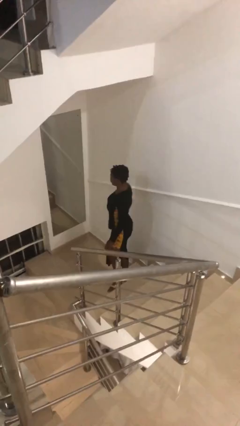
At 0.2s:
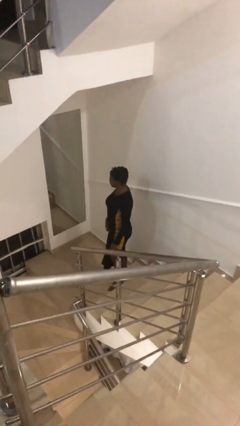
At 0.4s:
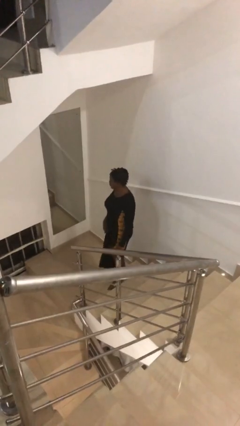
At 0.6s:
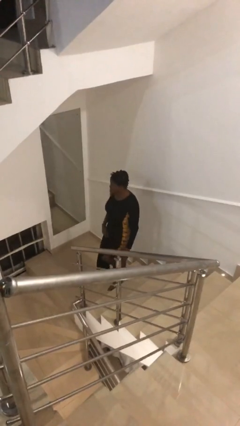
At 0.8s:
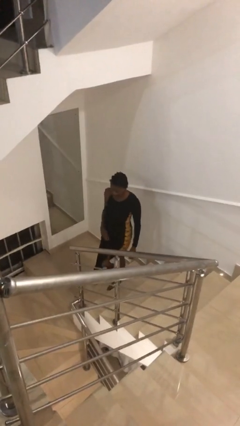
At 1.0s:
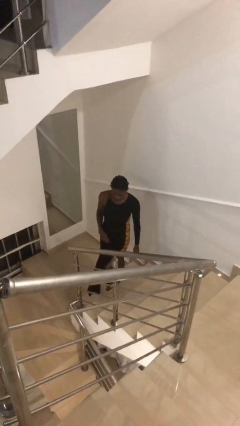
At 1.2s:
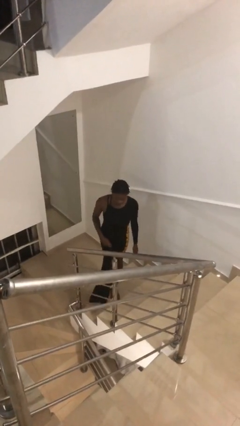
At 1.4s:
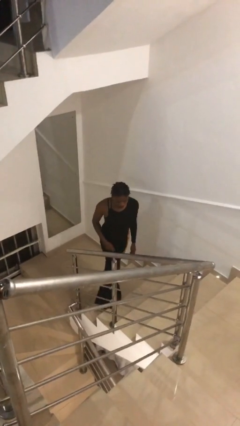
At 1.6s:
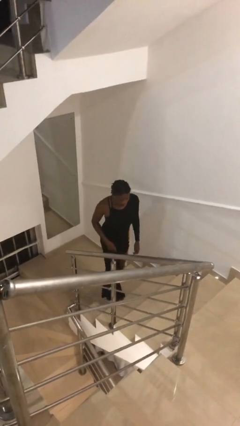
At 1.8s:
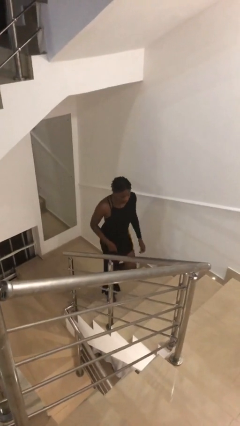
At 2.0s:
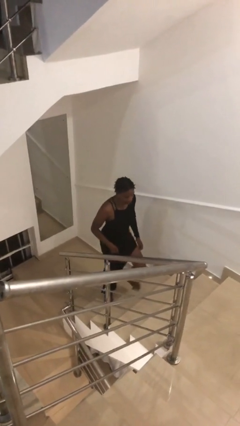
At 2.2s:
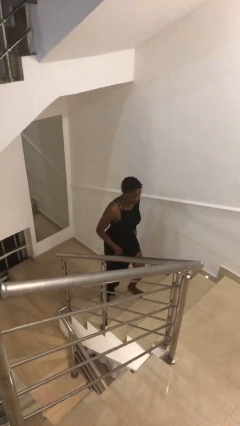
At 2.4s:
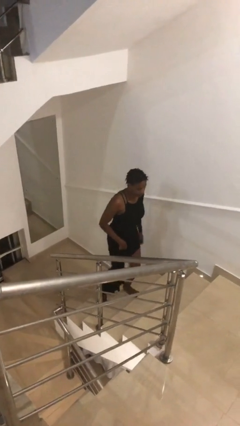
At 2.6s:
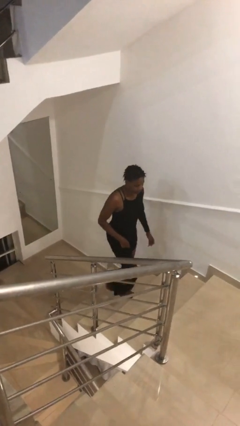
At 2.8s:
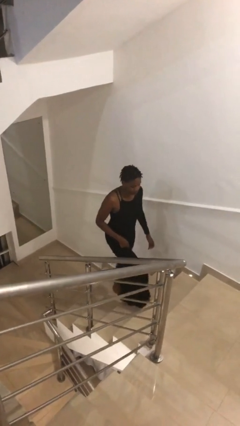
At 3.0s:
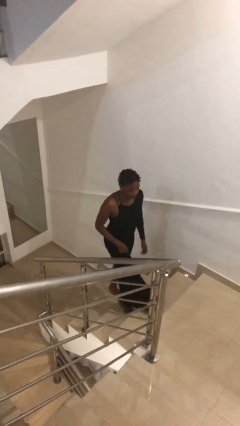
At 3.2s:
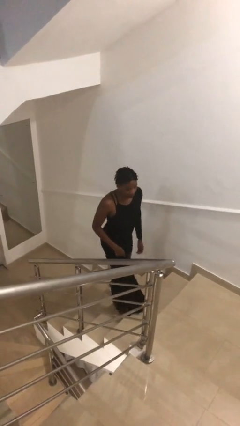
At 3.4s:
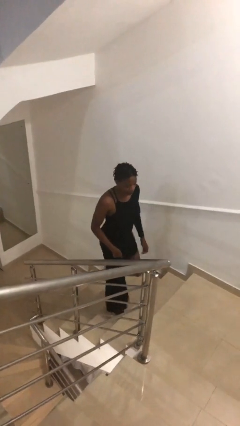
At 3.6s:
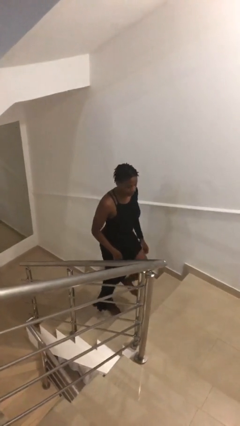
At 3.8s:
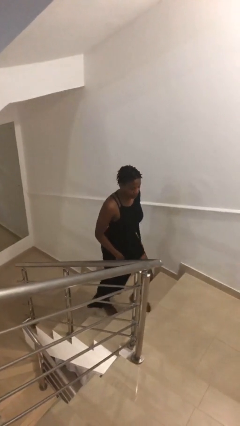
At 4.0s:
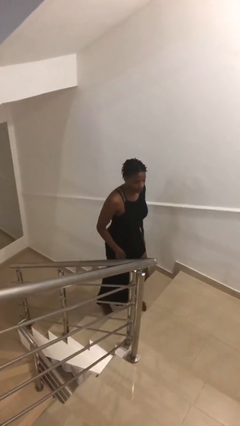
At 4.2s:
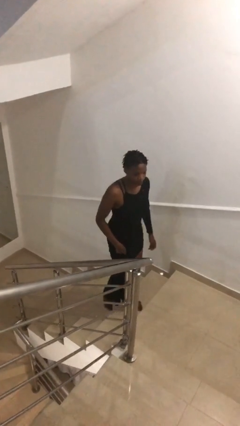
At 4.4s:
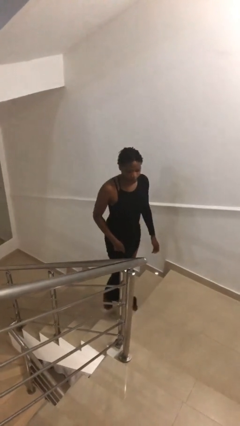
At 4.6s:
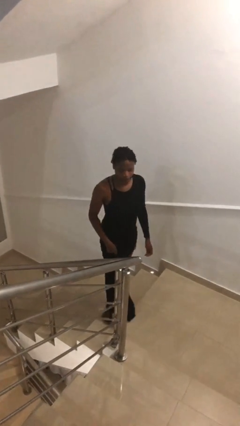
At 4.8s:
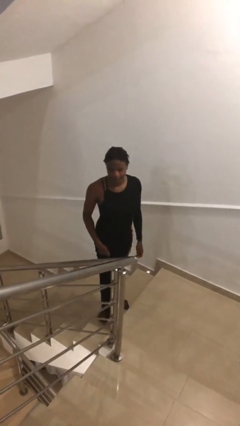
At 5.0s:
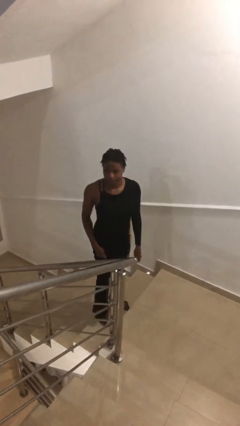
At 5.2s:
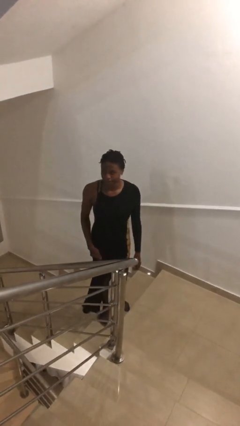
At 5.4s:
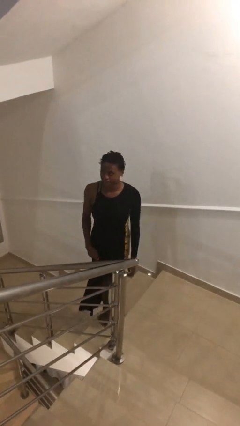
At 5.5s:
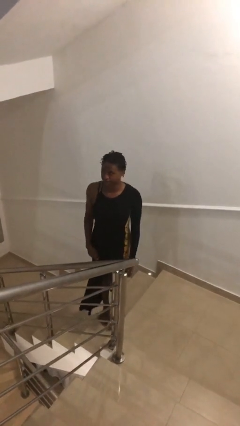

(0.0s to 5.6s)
person climbs up stairs

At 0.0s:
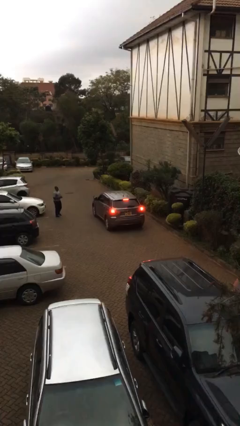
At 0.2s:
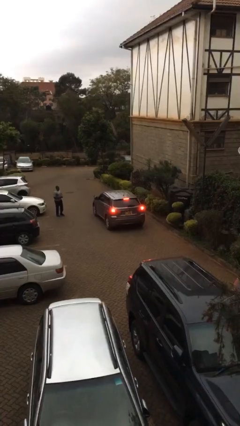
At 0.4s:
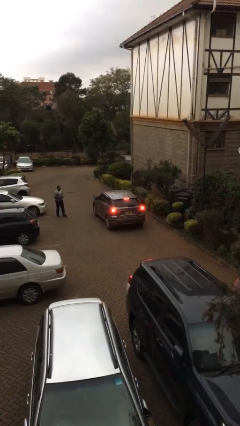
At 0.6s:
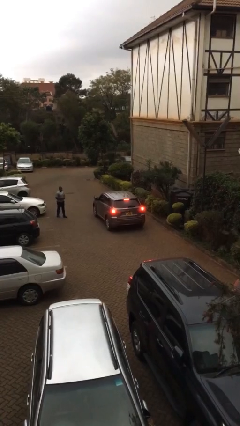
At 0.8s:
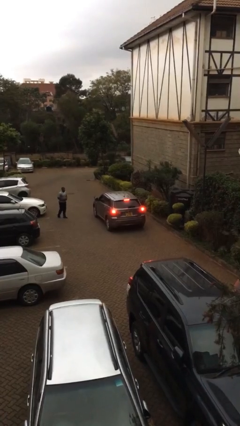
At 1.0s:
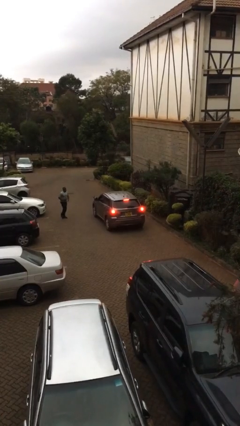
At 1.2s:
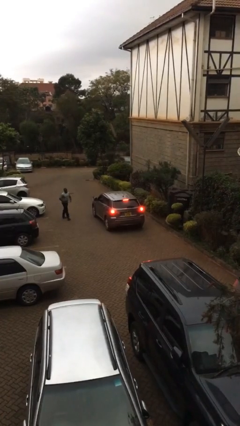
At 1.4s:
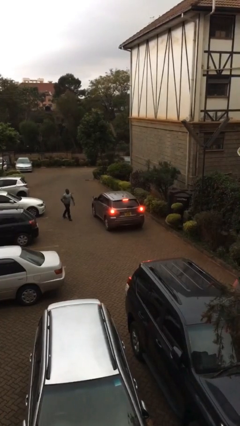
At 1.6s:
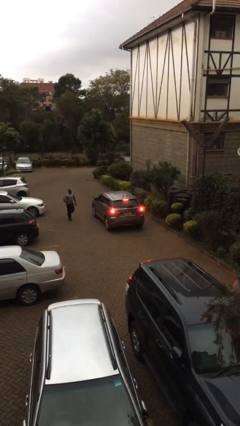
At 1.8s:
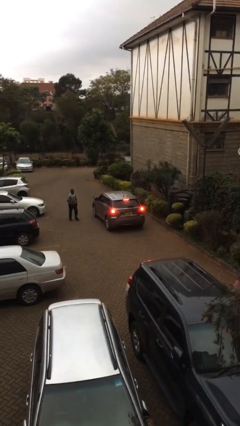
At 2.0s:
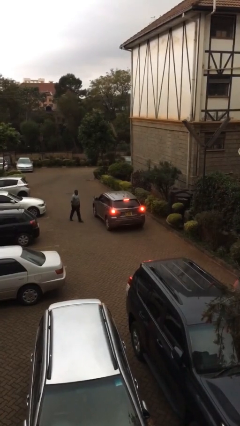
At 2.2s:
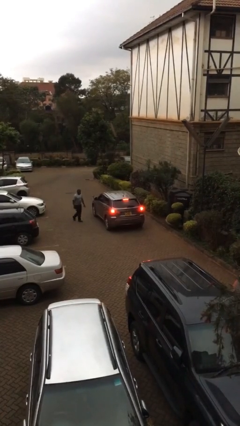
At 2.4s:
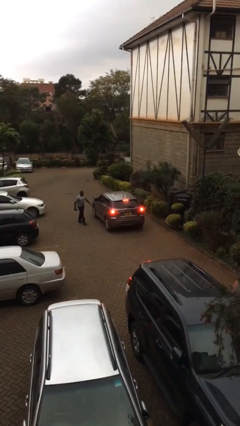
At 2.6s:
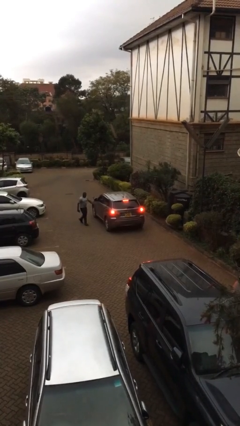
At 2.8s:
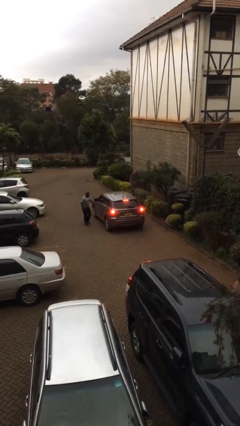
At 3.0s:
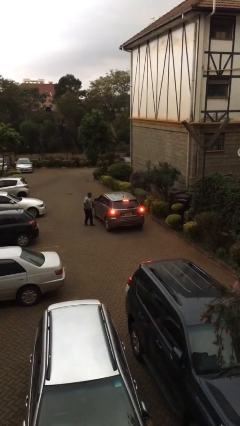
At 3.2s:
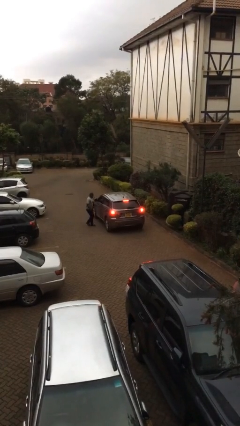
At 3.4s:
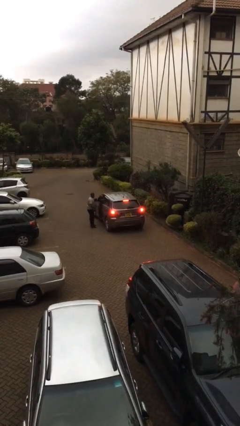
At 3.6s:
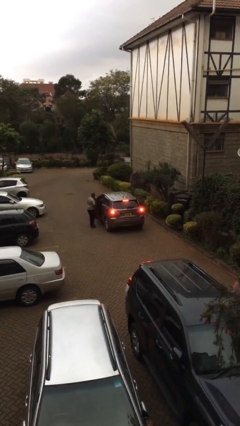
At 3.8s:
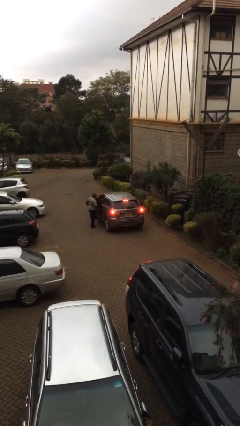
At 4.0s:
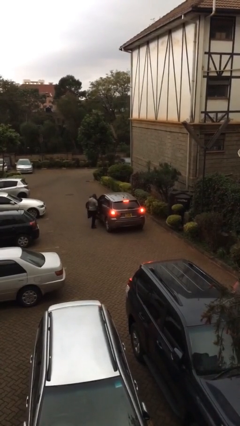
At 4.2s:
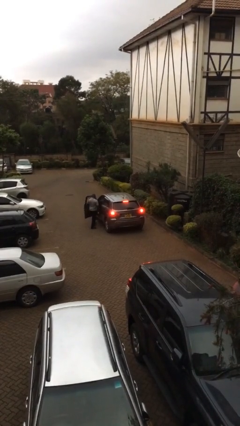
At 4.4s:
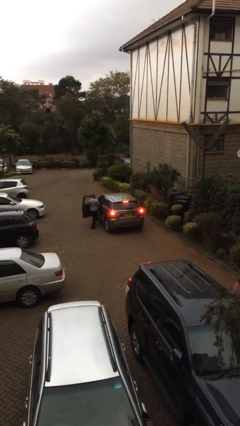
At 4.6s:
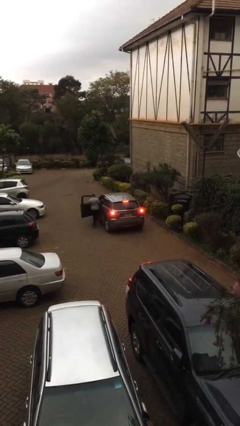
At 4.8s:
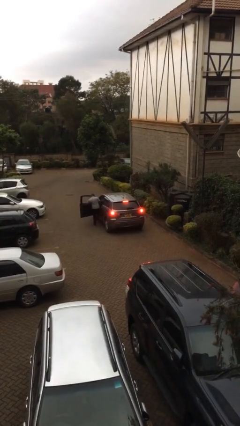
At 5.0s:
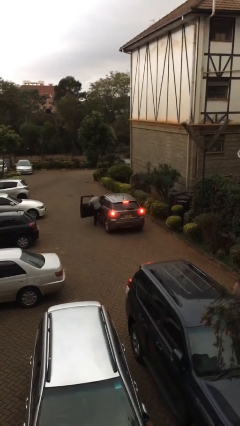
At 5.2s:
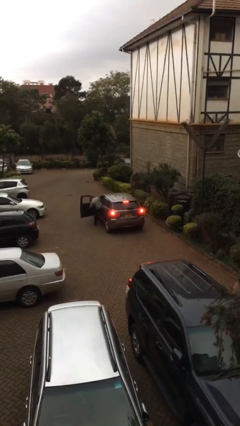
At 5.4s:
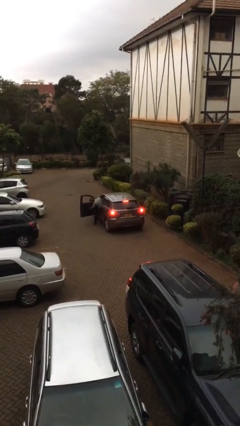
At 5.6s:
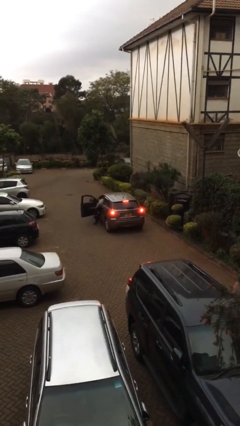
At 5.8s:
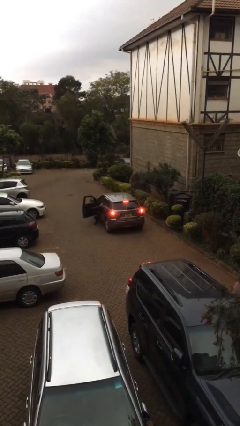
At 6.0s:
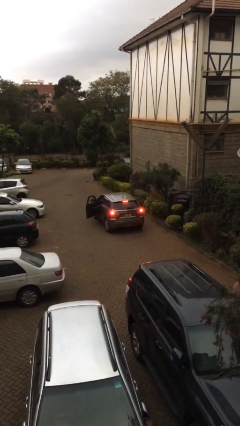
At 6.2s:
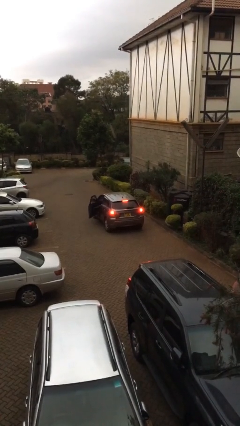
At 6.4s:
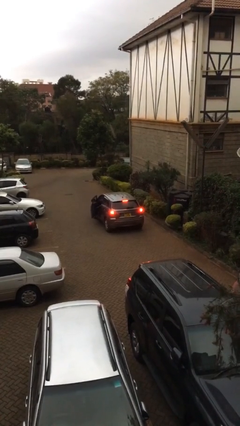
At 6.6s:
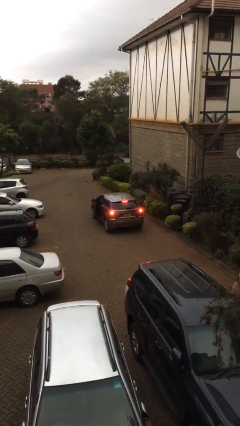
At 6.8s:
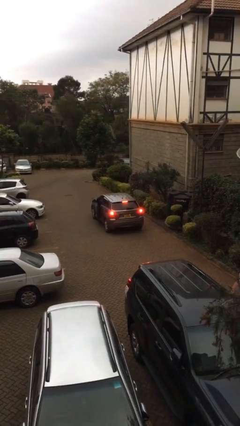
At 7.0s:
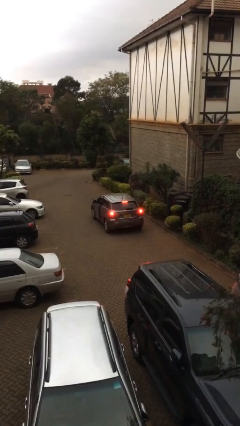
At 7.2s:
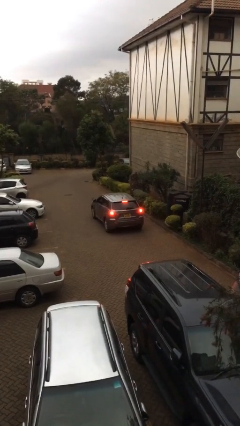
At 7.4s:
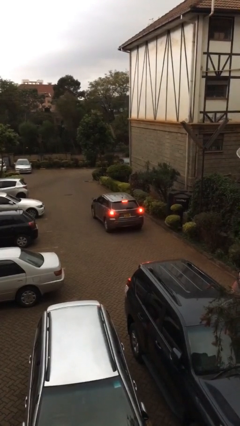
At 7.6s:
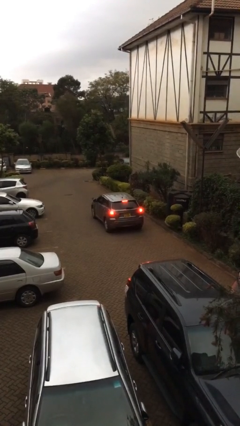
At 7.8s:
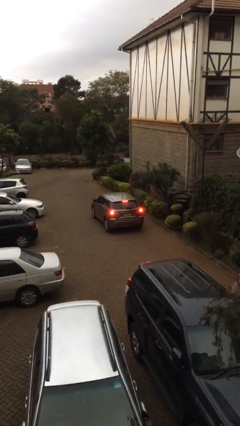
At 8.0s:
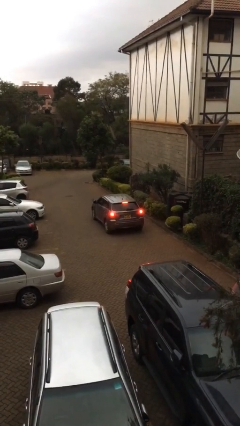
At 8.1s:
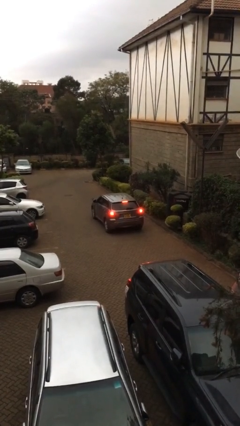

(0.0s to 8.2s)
car picks up person

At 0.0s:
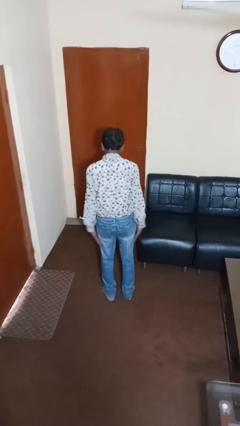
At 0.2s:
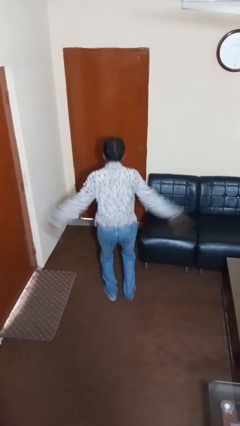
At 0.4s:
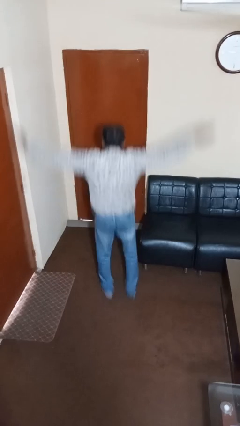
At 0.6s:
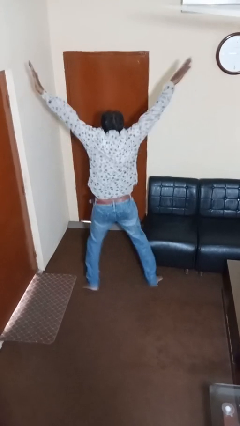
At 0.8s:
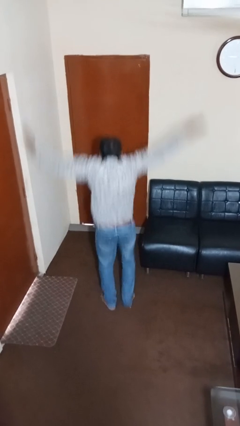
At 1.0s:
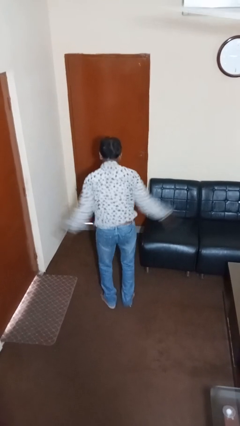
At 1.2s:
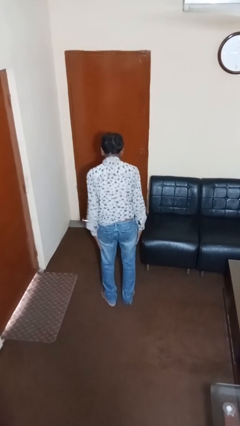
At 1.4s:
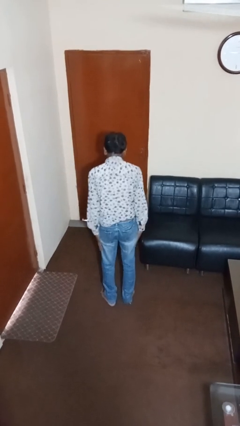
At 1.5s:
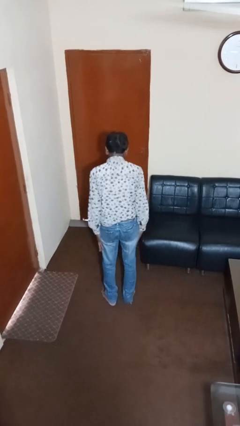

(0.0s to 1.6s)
person exercises with jumping jacks

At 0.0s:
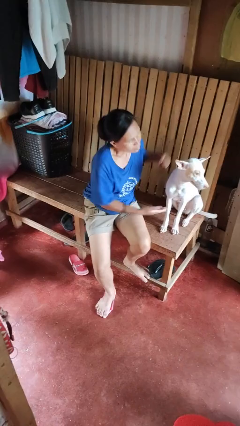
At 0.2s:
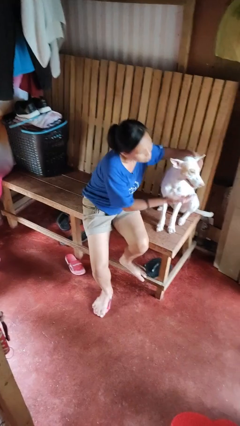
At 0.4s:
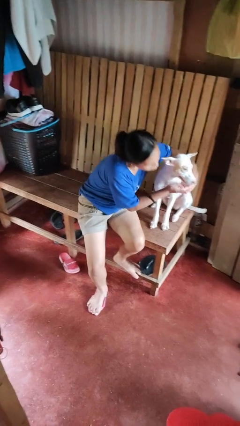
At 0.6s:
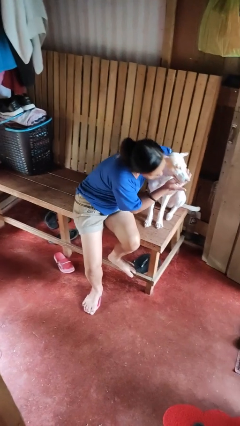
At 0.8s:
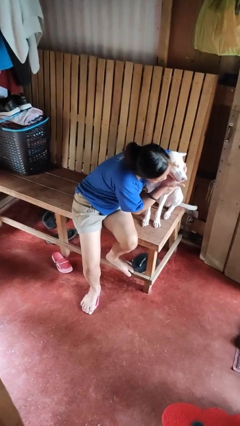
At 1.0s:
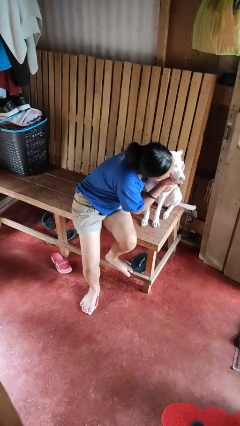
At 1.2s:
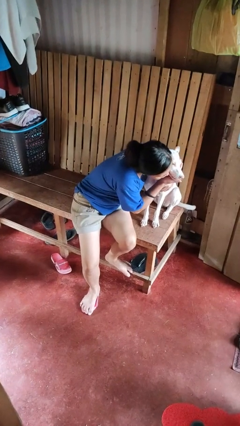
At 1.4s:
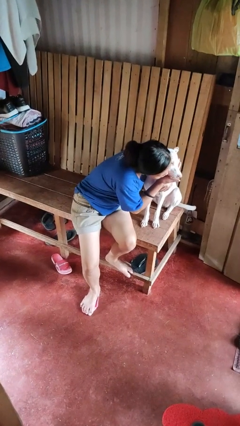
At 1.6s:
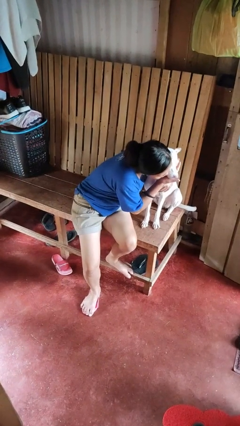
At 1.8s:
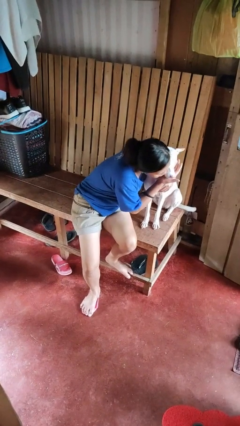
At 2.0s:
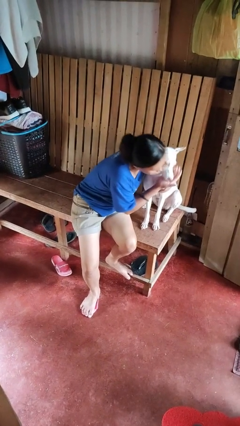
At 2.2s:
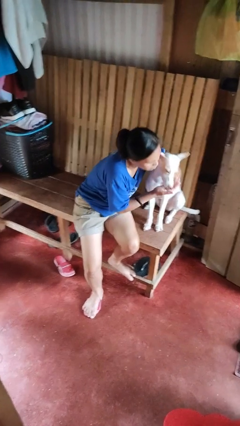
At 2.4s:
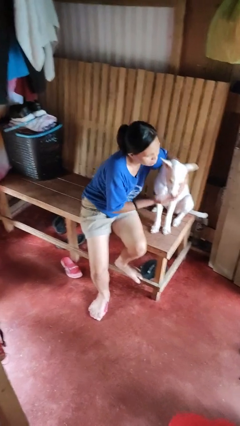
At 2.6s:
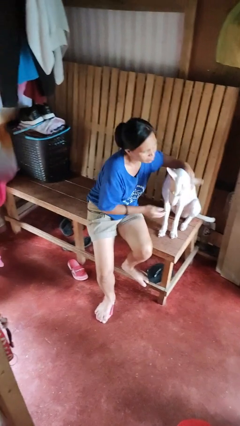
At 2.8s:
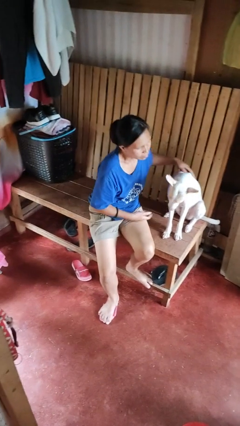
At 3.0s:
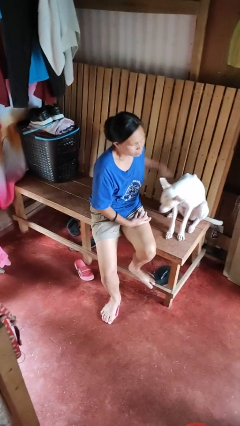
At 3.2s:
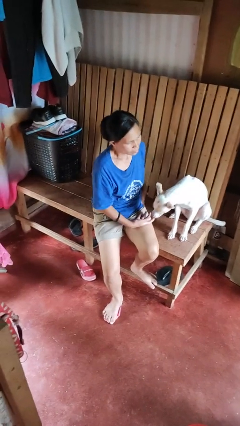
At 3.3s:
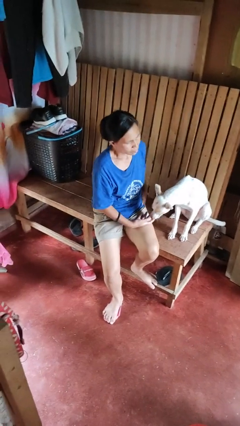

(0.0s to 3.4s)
person hugs dog
